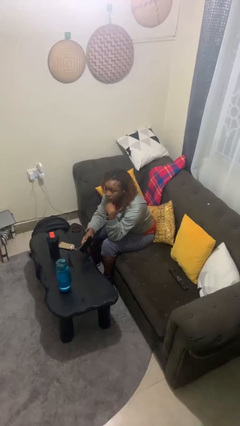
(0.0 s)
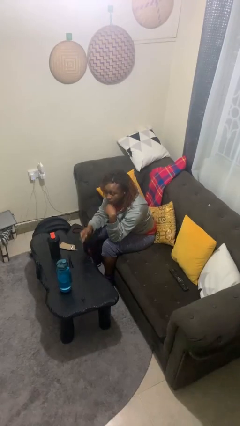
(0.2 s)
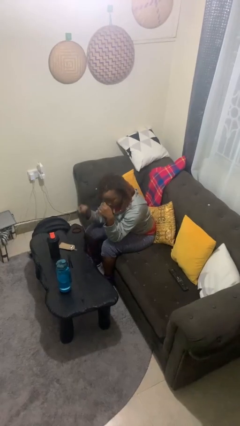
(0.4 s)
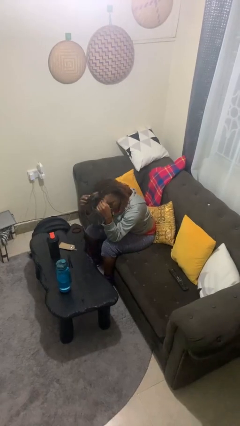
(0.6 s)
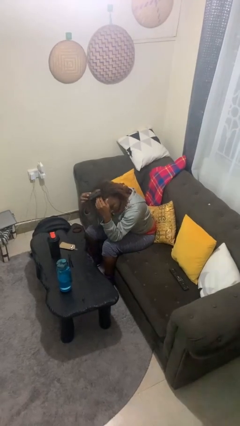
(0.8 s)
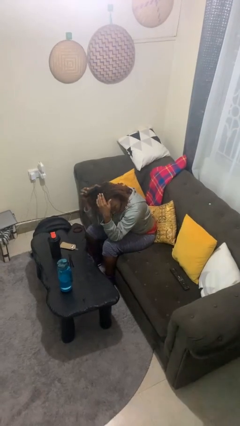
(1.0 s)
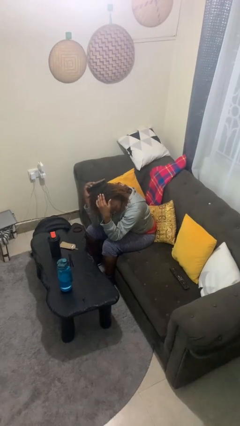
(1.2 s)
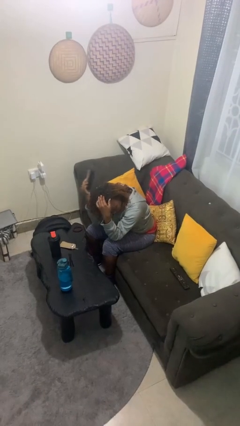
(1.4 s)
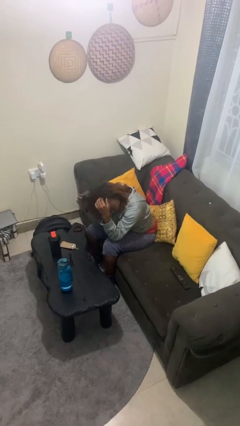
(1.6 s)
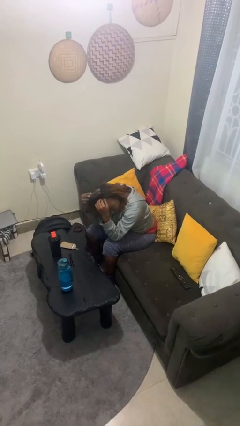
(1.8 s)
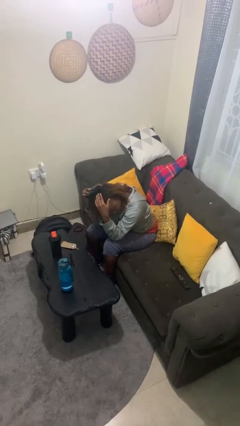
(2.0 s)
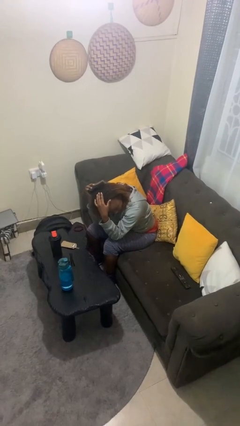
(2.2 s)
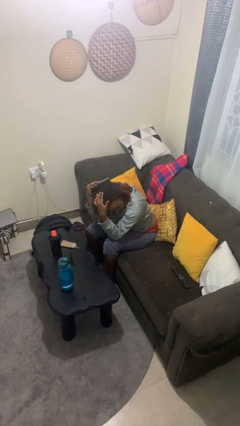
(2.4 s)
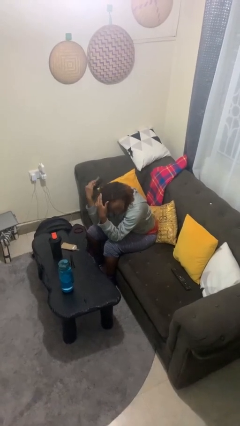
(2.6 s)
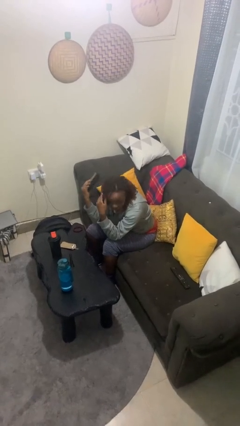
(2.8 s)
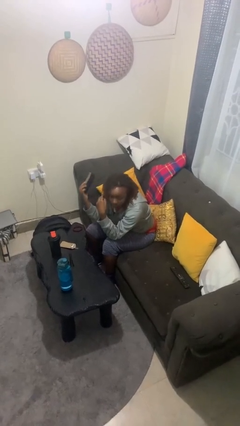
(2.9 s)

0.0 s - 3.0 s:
person brushes hair

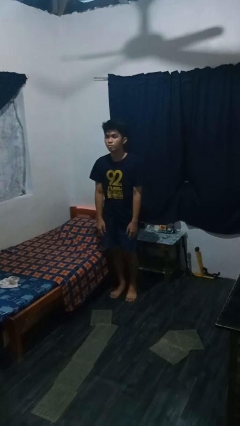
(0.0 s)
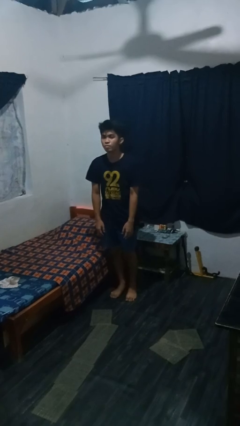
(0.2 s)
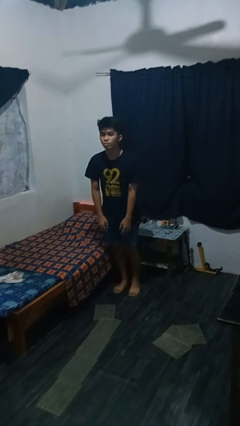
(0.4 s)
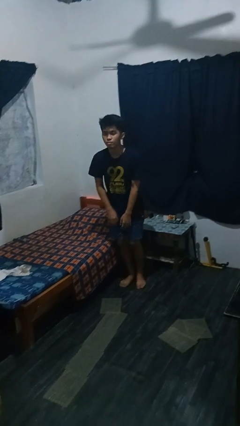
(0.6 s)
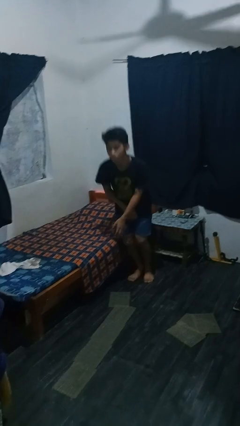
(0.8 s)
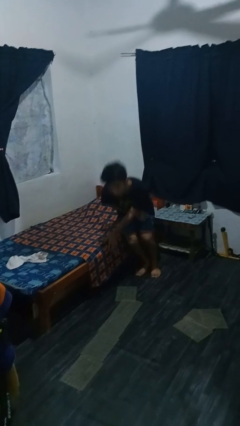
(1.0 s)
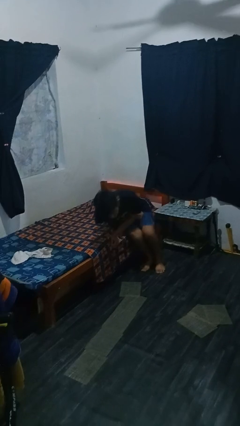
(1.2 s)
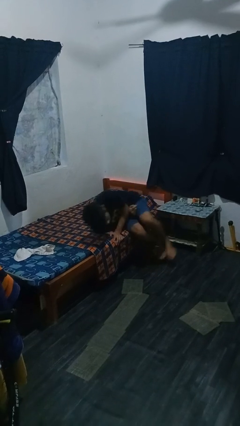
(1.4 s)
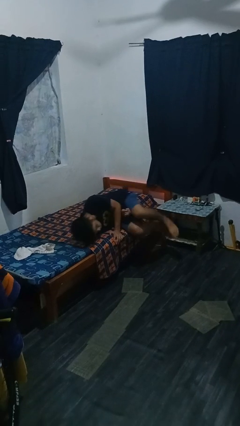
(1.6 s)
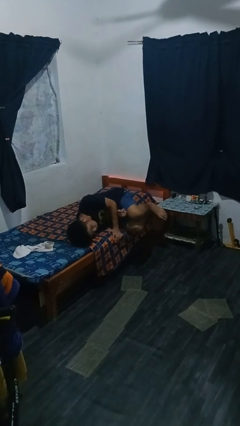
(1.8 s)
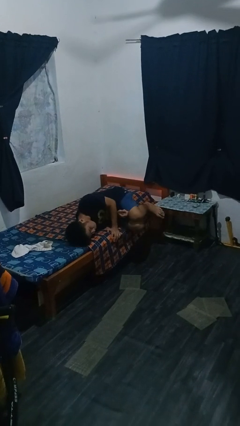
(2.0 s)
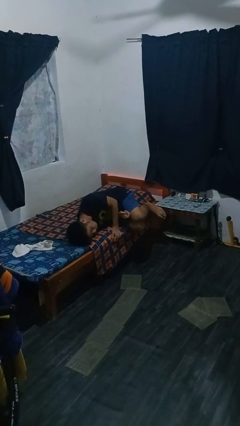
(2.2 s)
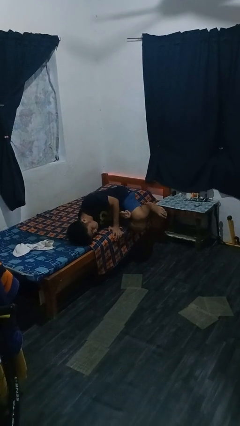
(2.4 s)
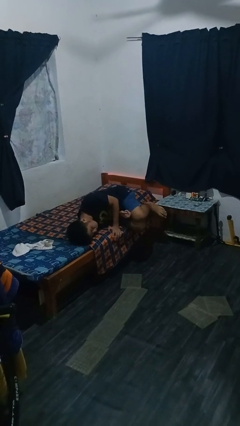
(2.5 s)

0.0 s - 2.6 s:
person lies down on bed

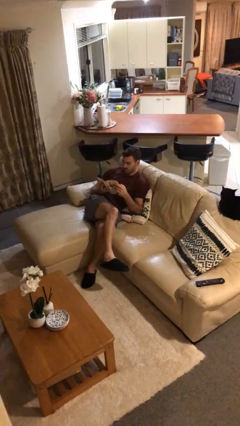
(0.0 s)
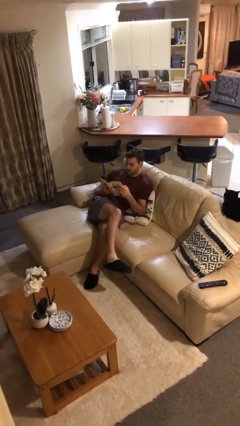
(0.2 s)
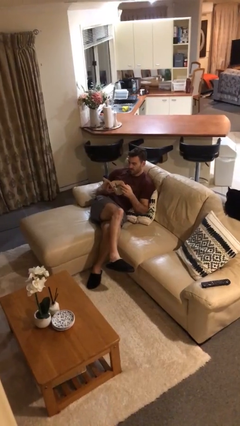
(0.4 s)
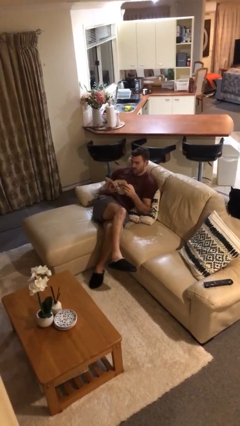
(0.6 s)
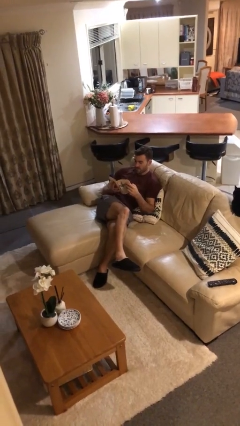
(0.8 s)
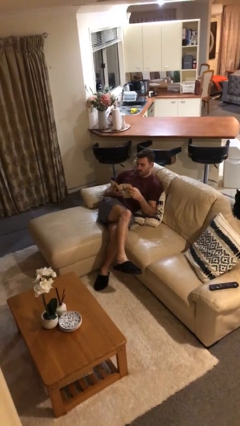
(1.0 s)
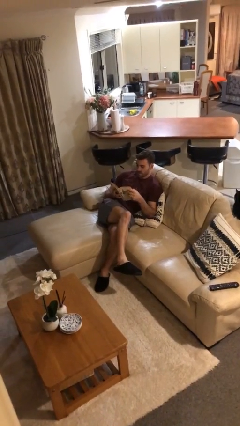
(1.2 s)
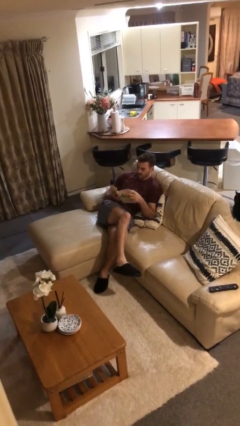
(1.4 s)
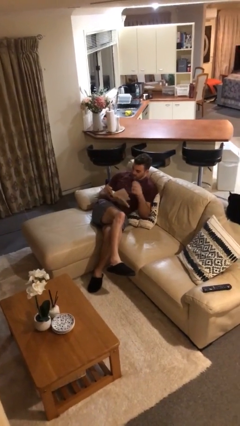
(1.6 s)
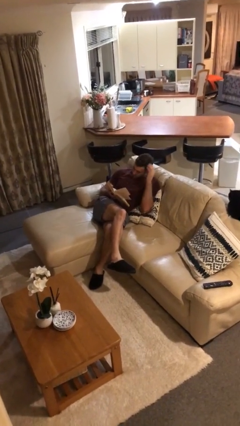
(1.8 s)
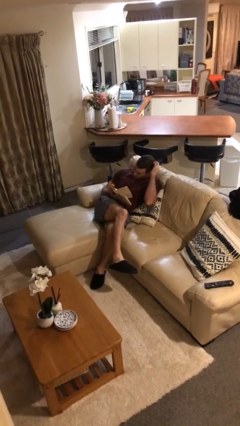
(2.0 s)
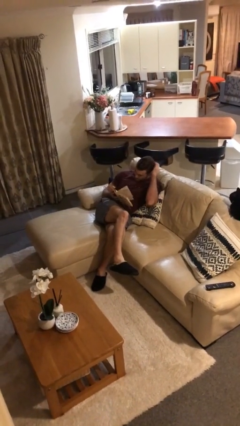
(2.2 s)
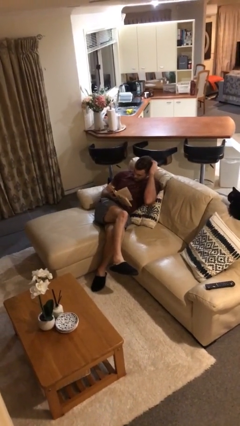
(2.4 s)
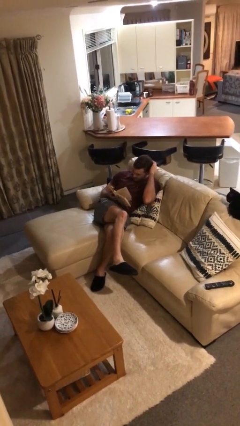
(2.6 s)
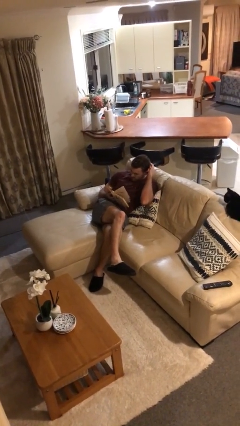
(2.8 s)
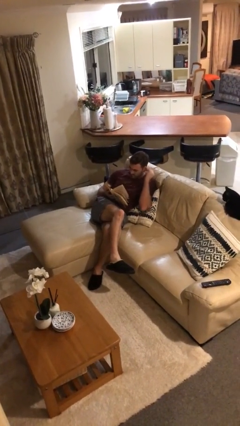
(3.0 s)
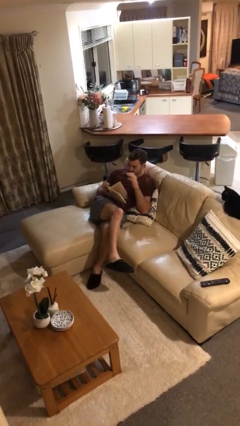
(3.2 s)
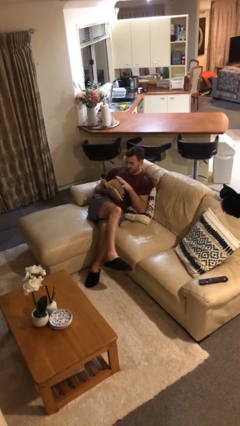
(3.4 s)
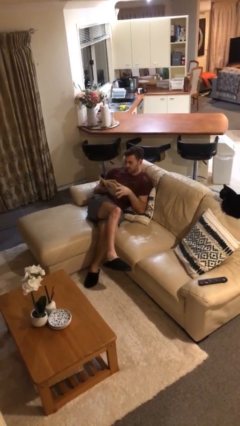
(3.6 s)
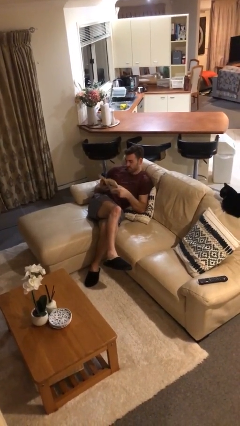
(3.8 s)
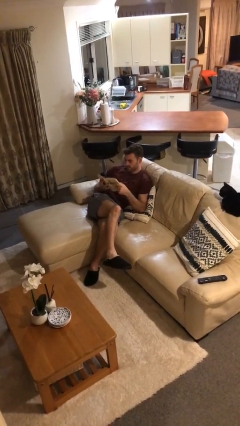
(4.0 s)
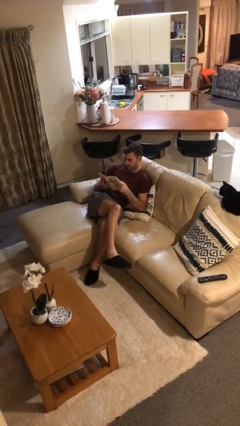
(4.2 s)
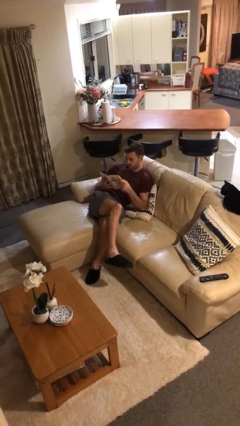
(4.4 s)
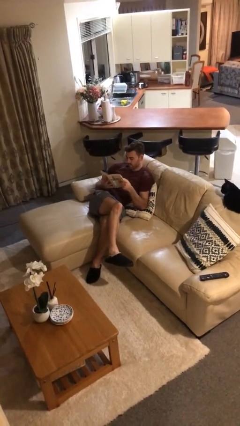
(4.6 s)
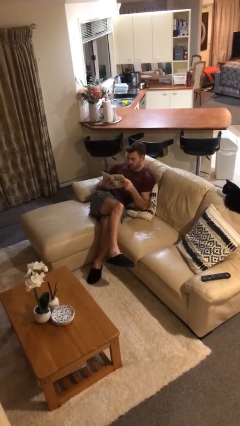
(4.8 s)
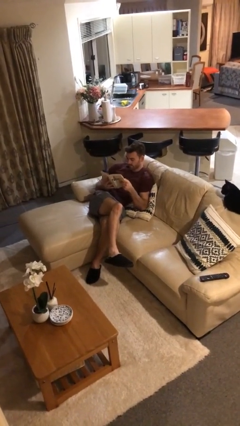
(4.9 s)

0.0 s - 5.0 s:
person reads document

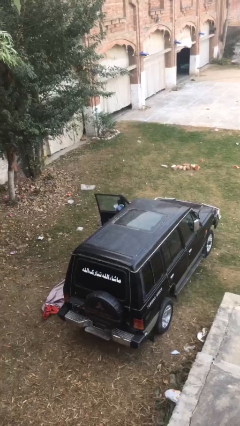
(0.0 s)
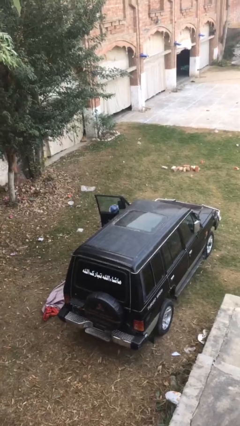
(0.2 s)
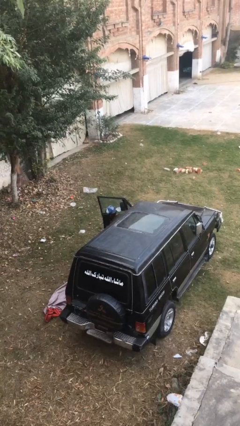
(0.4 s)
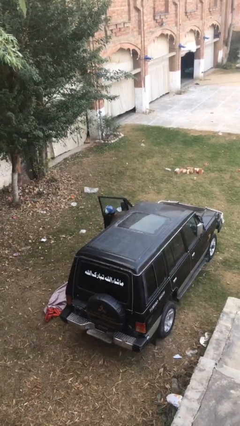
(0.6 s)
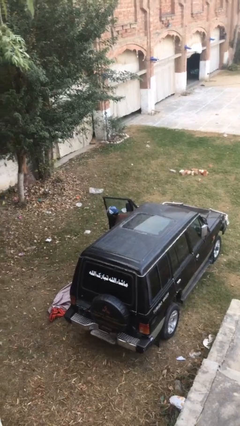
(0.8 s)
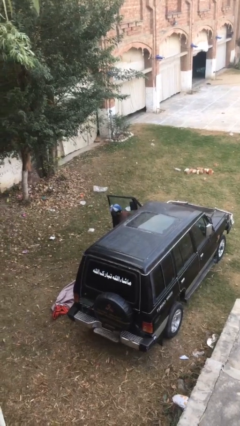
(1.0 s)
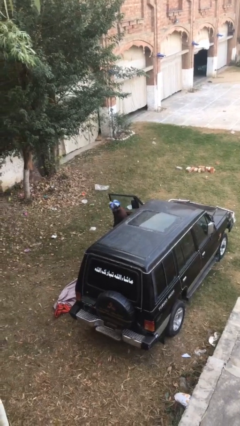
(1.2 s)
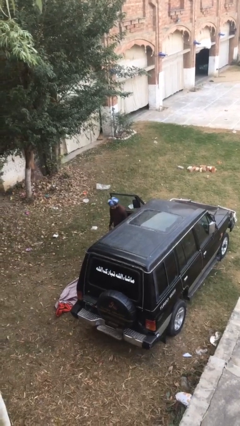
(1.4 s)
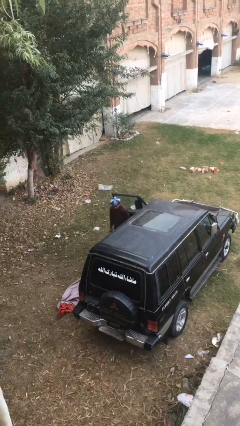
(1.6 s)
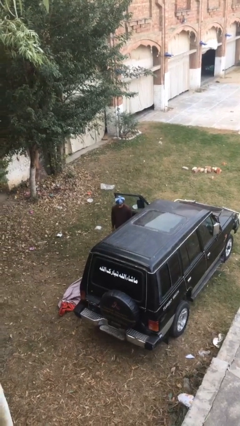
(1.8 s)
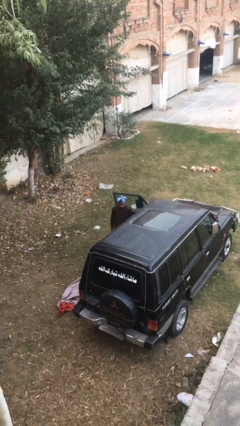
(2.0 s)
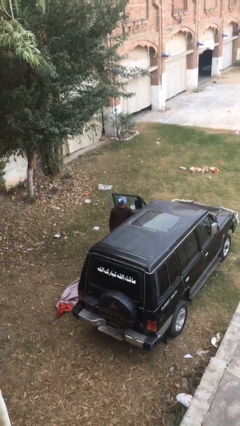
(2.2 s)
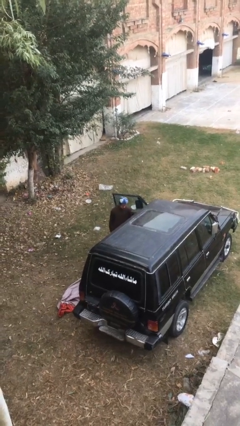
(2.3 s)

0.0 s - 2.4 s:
person exits car

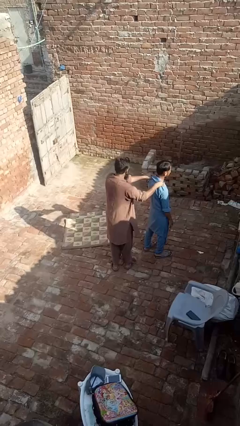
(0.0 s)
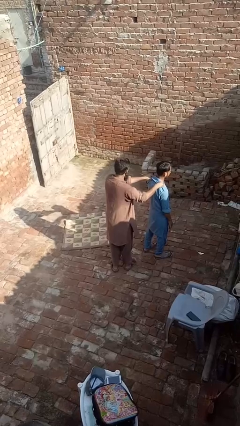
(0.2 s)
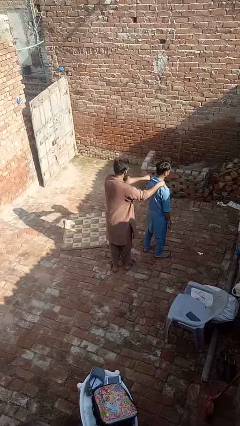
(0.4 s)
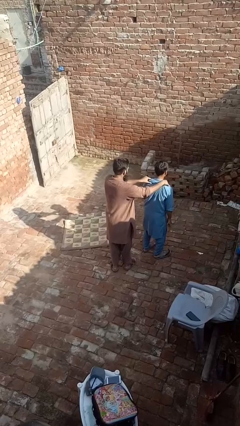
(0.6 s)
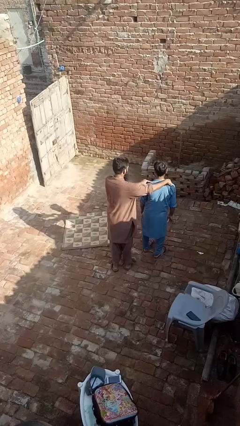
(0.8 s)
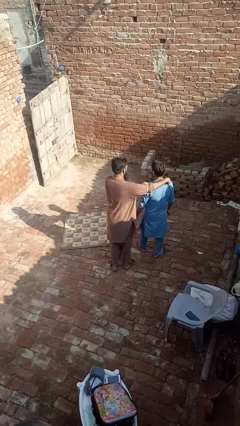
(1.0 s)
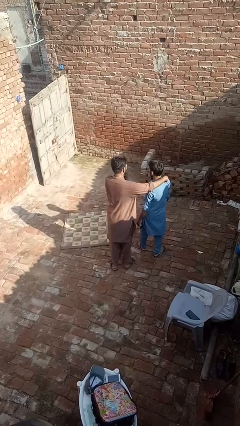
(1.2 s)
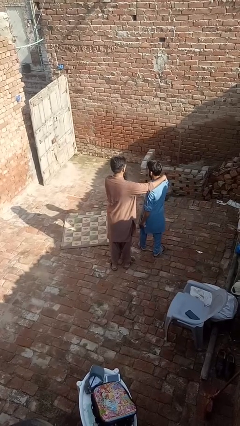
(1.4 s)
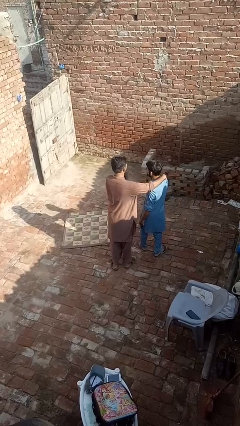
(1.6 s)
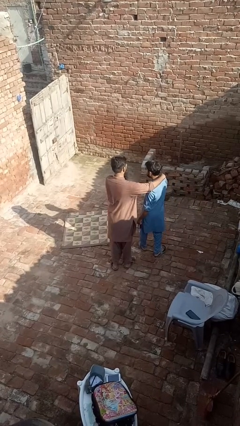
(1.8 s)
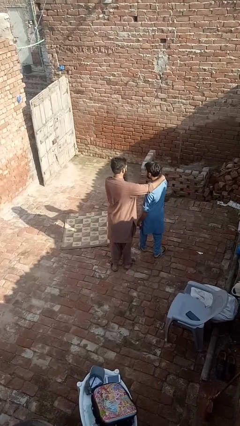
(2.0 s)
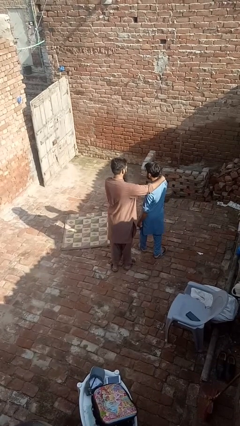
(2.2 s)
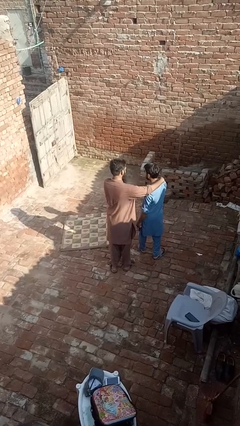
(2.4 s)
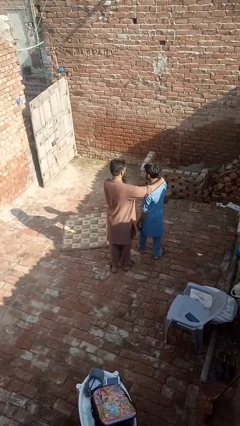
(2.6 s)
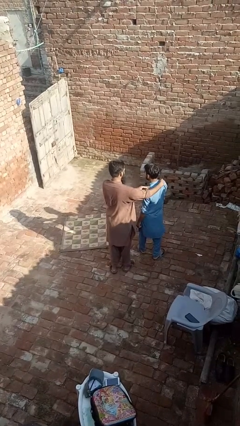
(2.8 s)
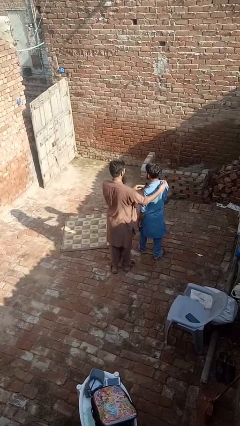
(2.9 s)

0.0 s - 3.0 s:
person spins person around

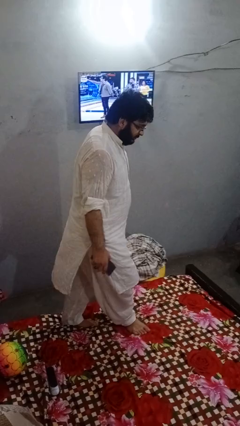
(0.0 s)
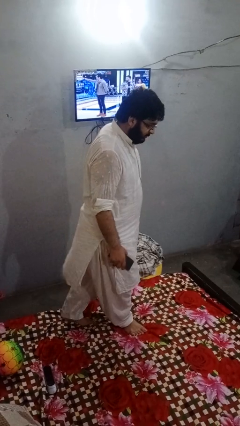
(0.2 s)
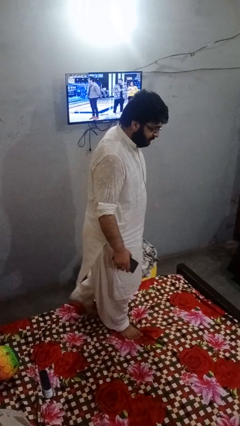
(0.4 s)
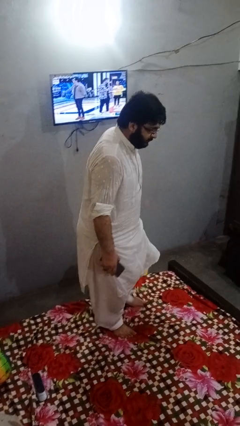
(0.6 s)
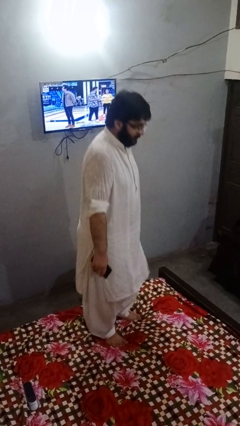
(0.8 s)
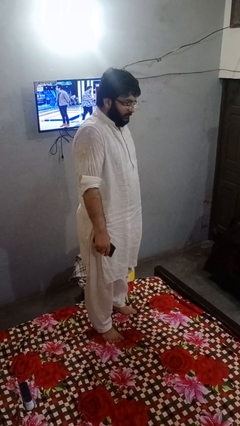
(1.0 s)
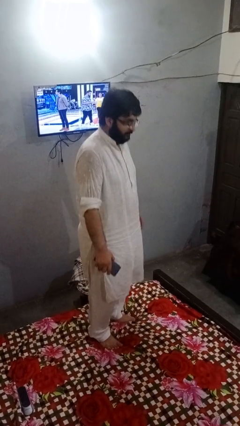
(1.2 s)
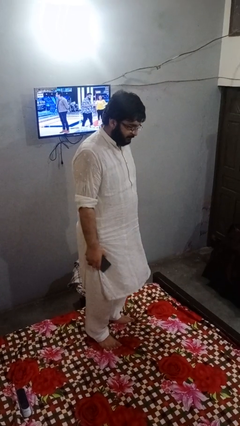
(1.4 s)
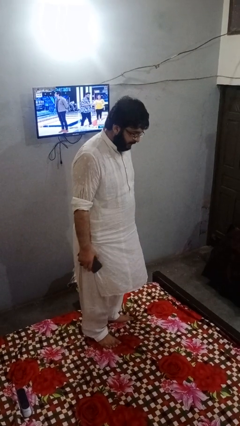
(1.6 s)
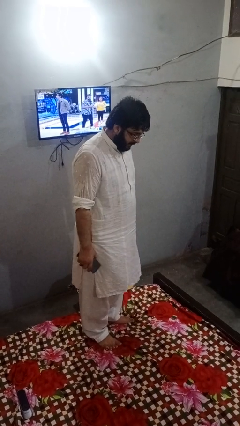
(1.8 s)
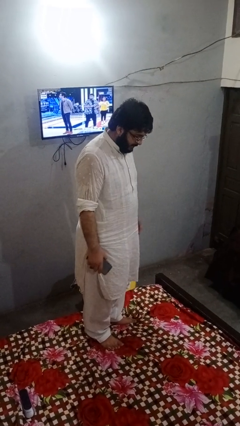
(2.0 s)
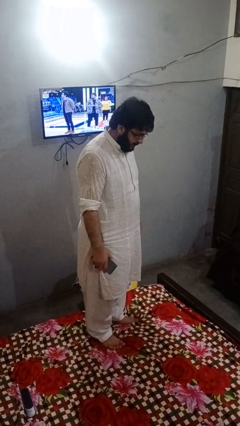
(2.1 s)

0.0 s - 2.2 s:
person jumps on bed
